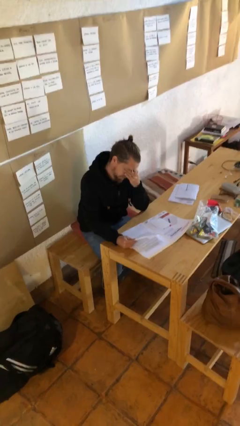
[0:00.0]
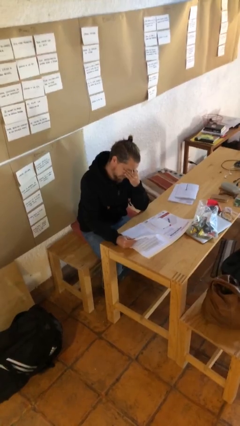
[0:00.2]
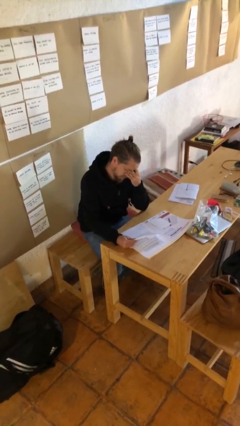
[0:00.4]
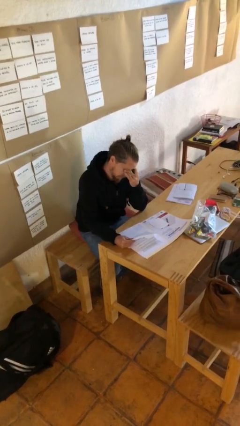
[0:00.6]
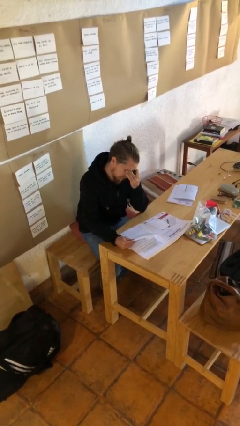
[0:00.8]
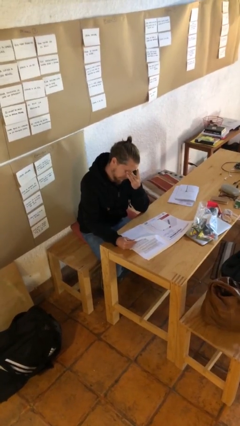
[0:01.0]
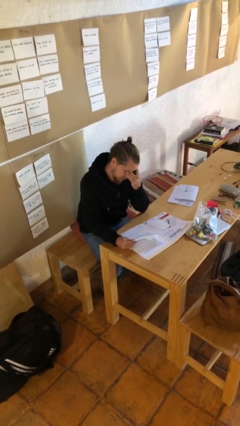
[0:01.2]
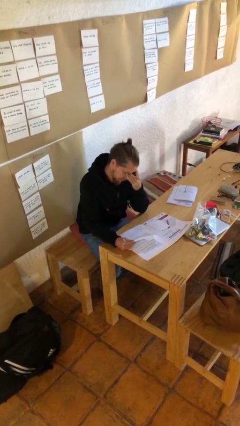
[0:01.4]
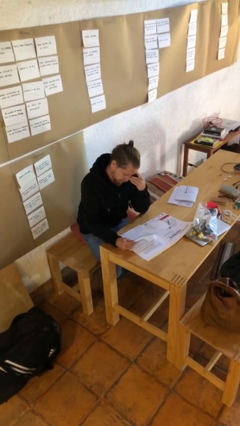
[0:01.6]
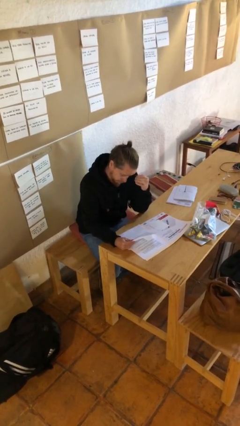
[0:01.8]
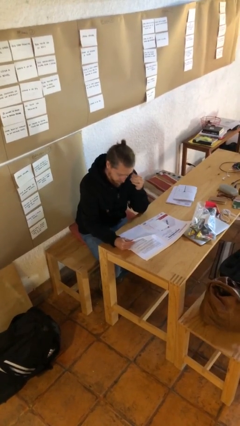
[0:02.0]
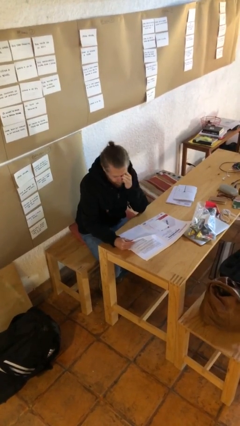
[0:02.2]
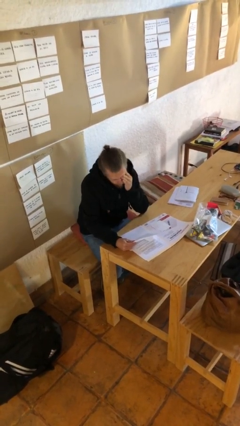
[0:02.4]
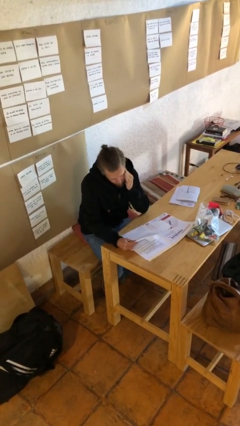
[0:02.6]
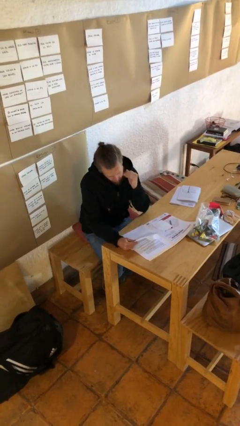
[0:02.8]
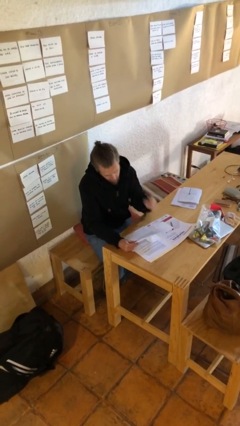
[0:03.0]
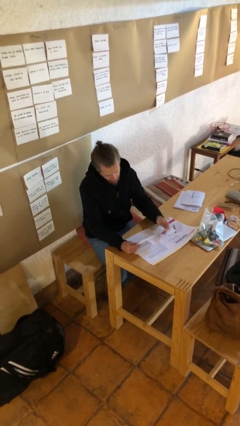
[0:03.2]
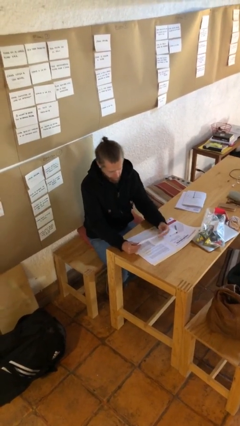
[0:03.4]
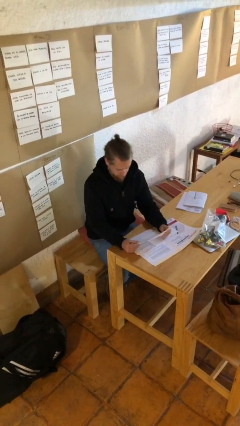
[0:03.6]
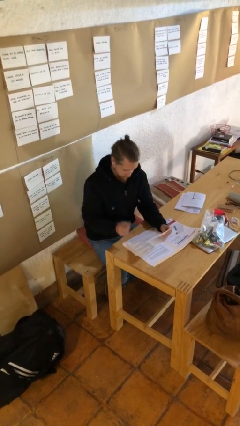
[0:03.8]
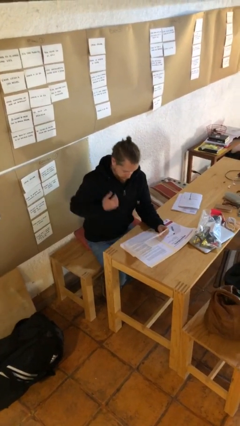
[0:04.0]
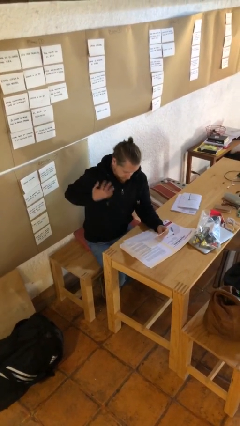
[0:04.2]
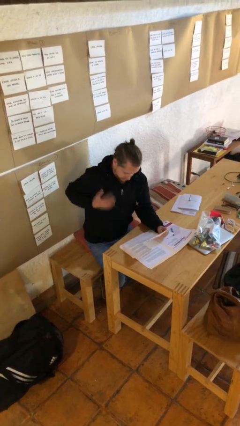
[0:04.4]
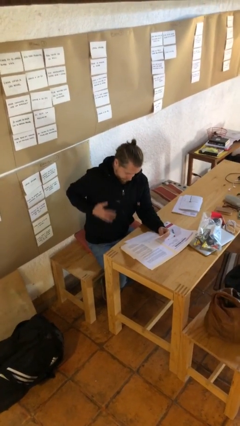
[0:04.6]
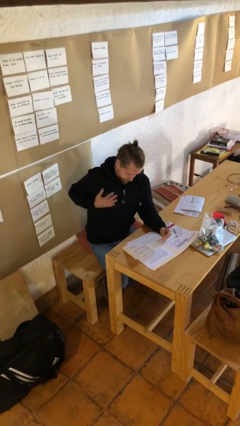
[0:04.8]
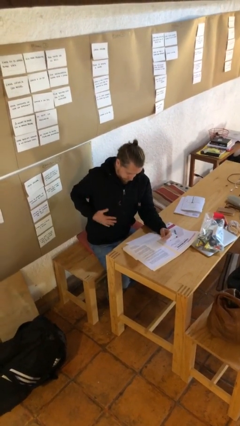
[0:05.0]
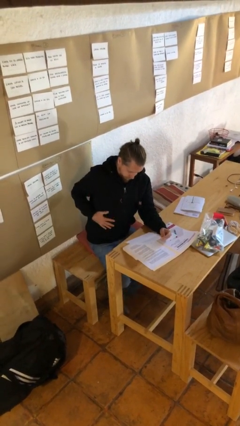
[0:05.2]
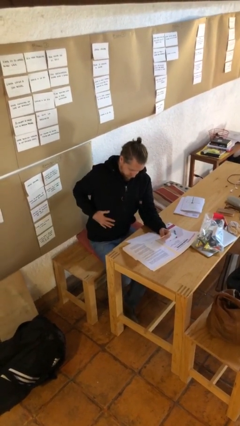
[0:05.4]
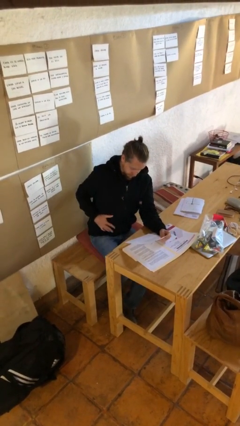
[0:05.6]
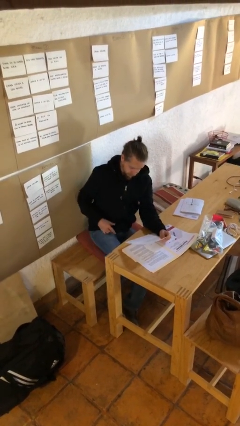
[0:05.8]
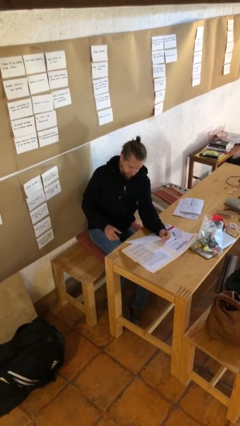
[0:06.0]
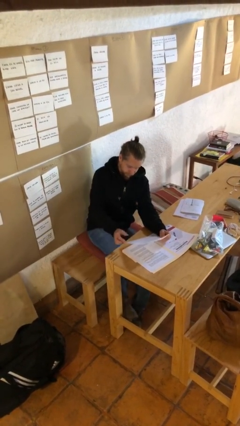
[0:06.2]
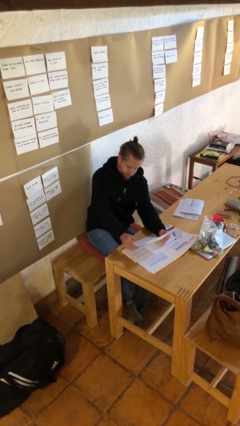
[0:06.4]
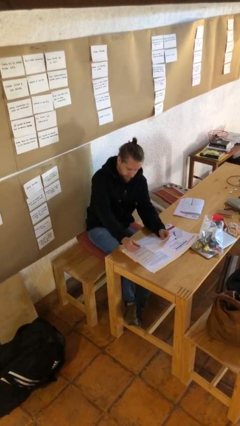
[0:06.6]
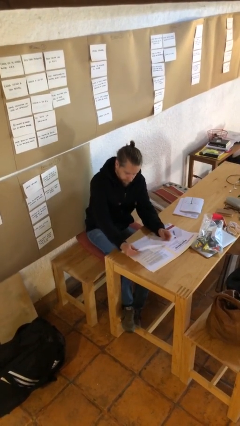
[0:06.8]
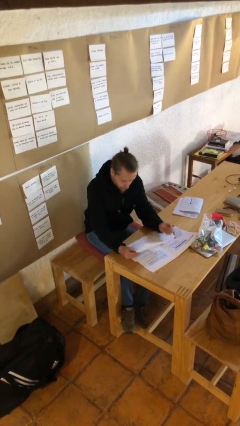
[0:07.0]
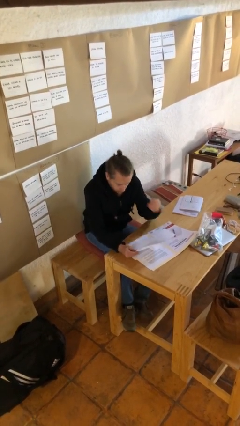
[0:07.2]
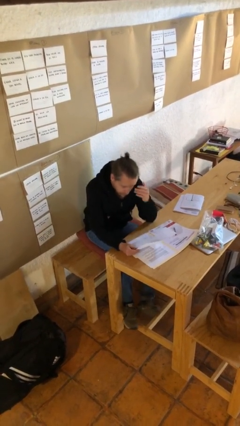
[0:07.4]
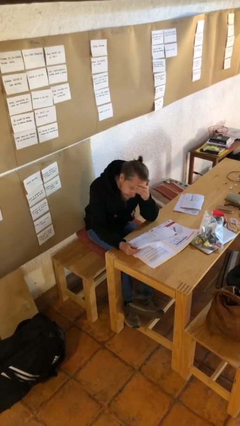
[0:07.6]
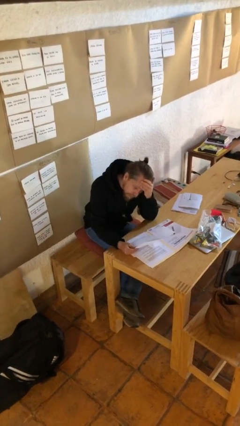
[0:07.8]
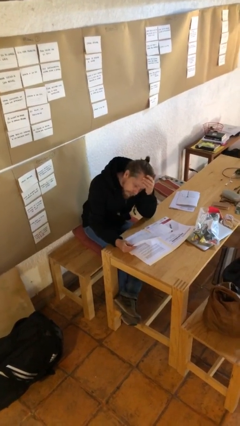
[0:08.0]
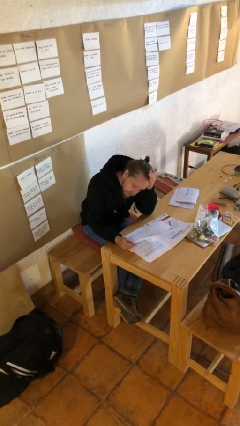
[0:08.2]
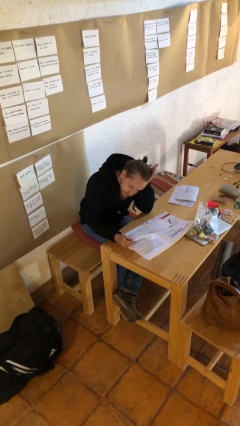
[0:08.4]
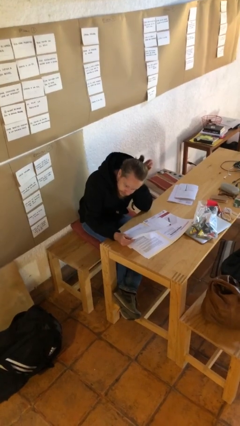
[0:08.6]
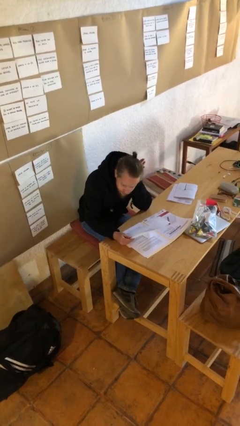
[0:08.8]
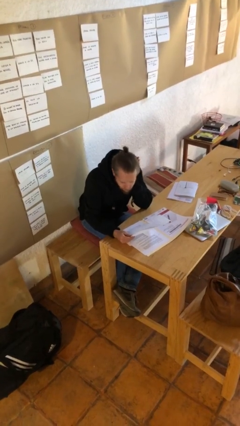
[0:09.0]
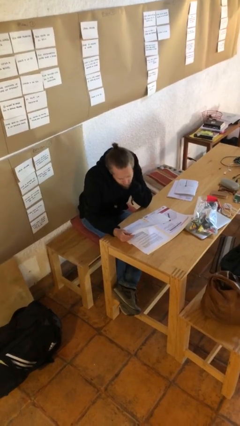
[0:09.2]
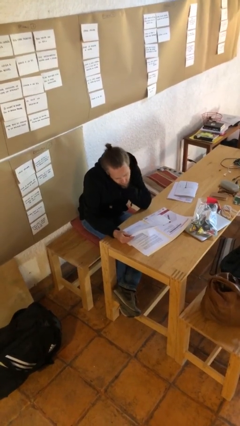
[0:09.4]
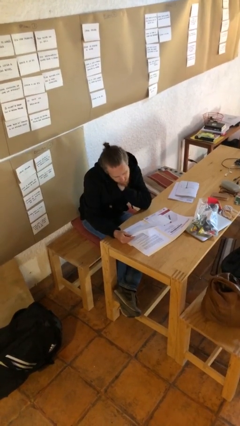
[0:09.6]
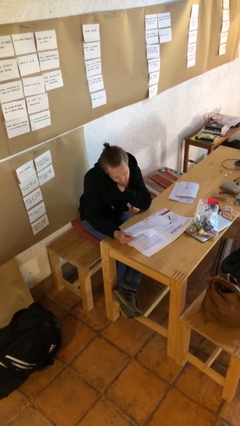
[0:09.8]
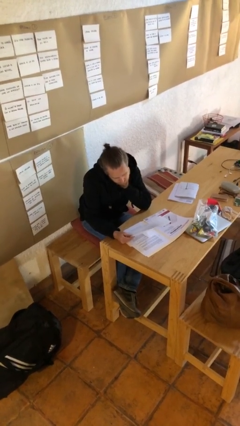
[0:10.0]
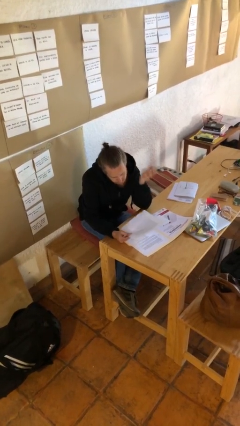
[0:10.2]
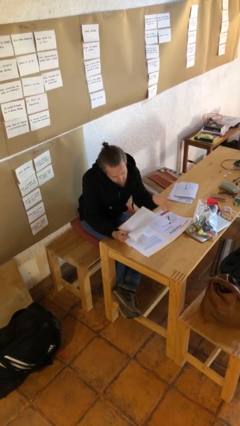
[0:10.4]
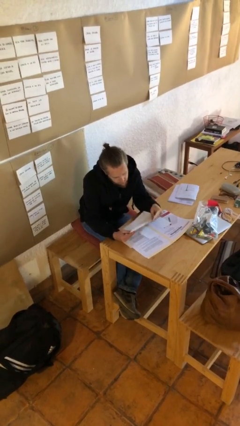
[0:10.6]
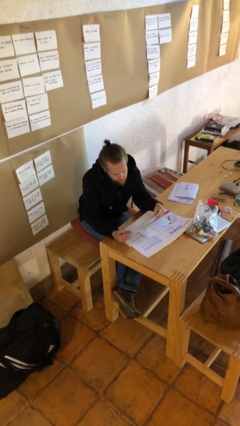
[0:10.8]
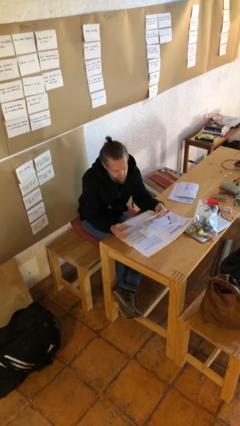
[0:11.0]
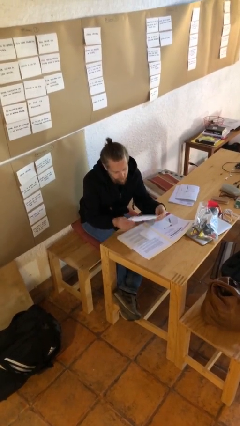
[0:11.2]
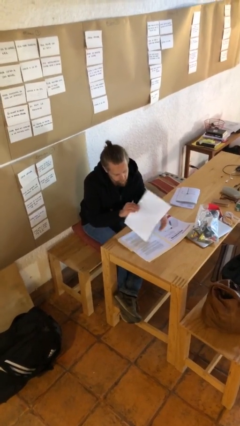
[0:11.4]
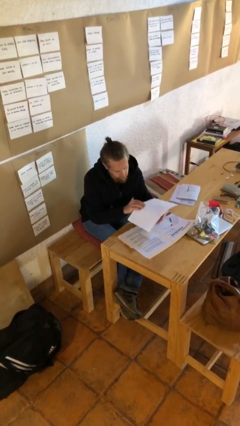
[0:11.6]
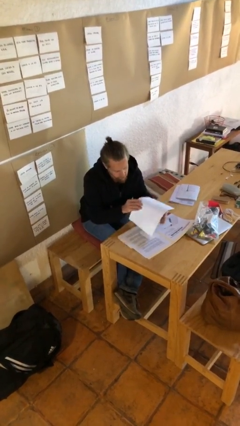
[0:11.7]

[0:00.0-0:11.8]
person reads document

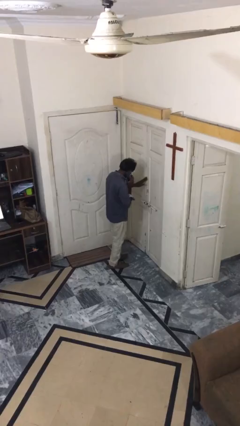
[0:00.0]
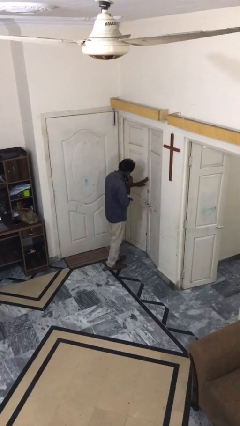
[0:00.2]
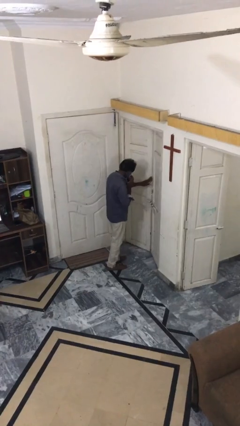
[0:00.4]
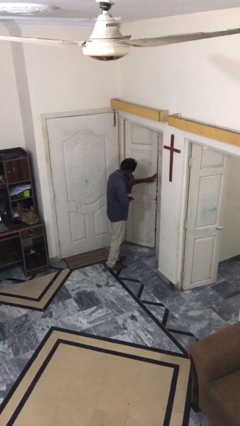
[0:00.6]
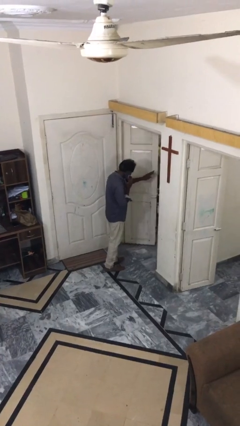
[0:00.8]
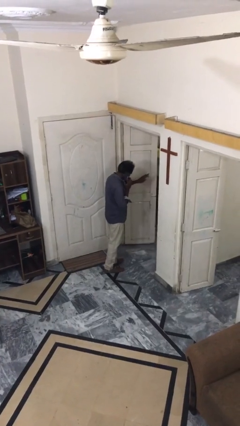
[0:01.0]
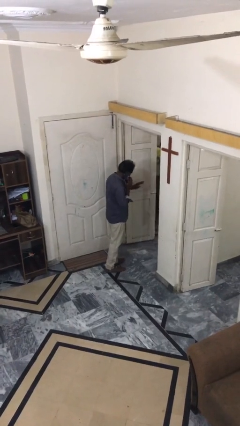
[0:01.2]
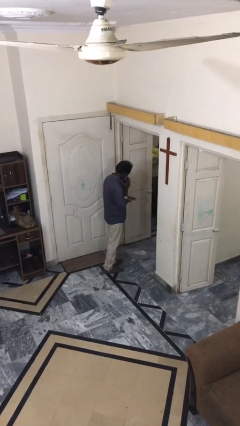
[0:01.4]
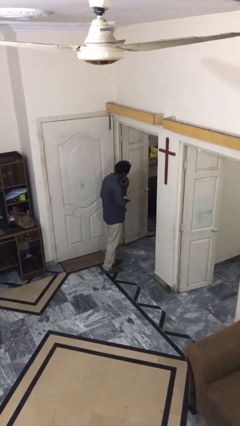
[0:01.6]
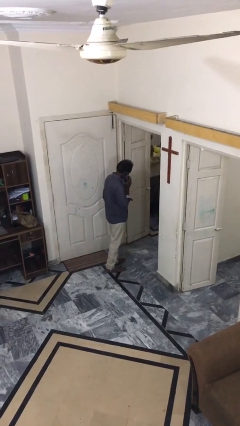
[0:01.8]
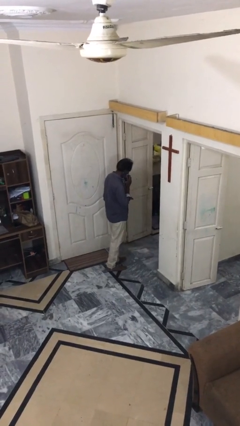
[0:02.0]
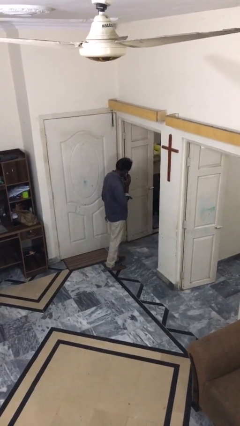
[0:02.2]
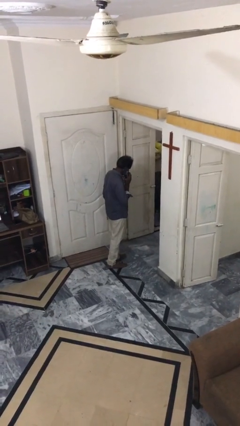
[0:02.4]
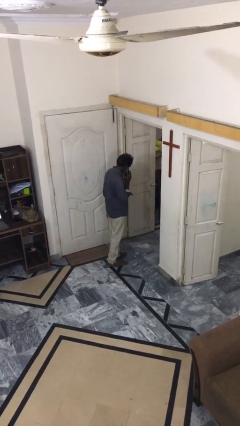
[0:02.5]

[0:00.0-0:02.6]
person opens facility door

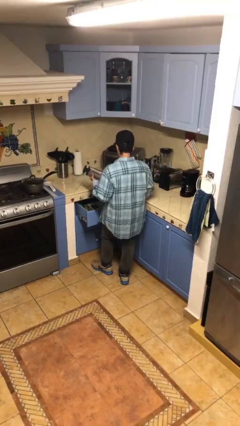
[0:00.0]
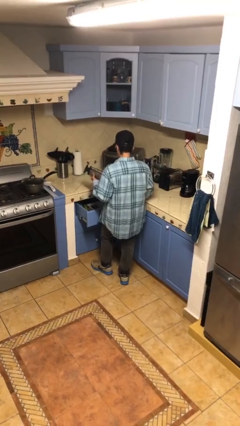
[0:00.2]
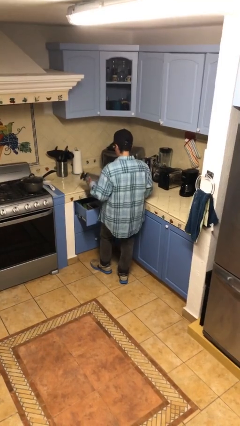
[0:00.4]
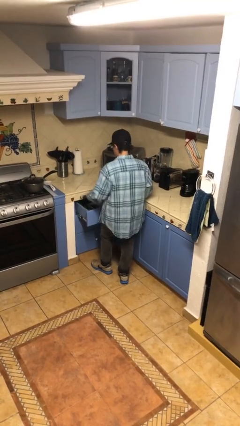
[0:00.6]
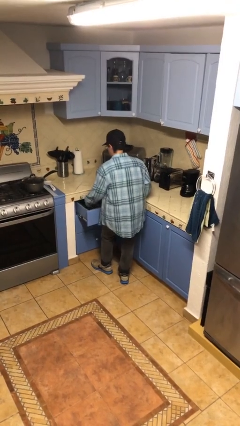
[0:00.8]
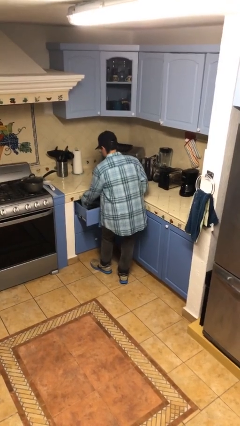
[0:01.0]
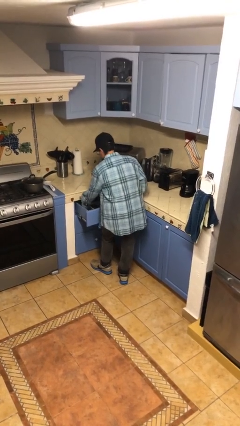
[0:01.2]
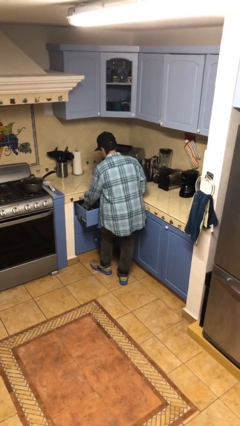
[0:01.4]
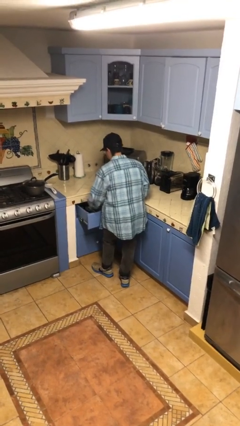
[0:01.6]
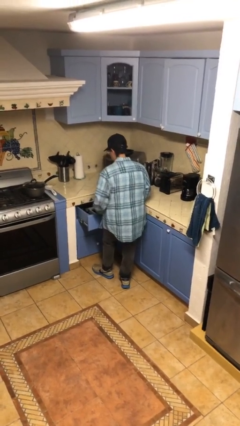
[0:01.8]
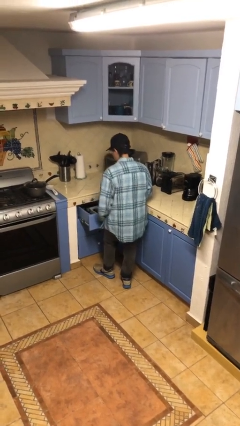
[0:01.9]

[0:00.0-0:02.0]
person puts object into kitchen drawer

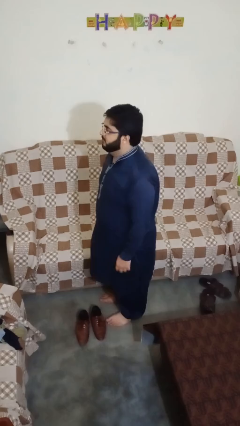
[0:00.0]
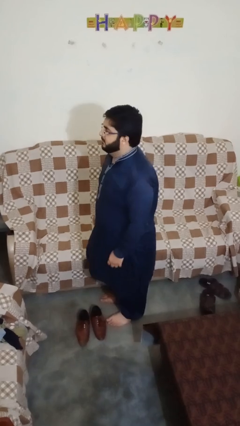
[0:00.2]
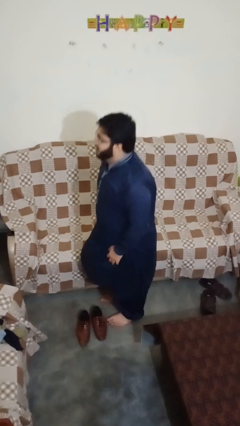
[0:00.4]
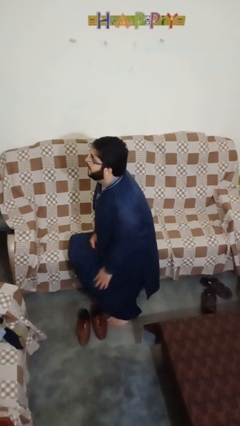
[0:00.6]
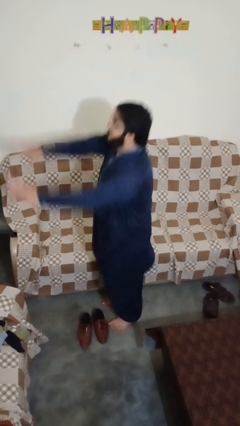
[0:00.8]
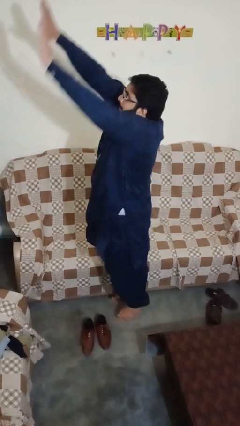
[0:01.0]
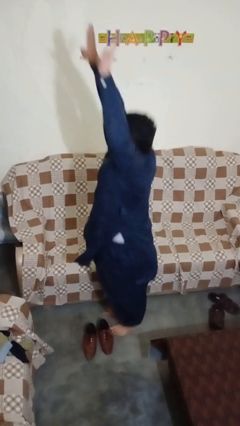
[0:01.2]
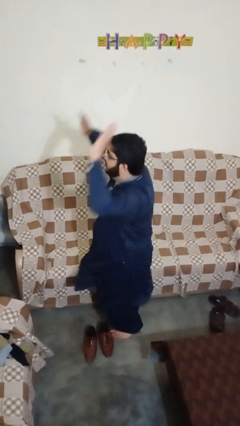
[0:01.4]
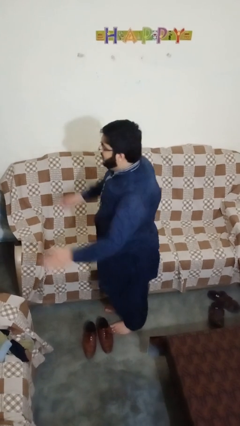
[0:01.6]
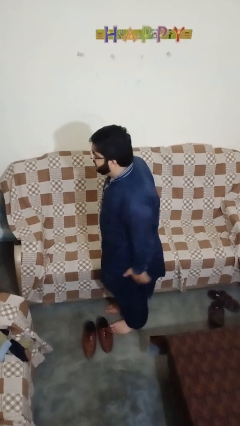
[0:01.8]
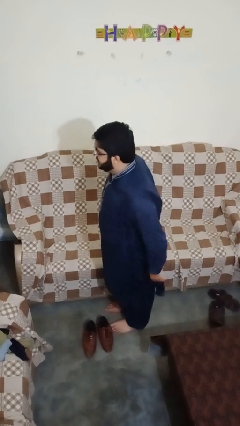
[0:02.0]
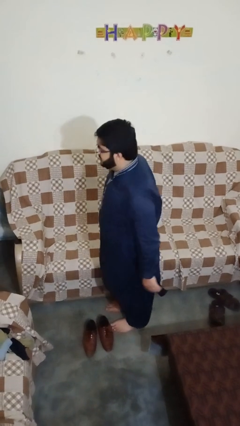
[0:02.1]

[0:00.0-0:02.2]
person jumps
